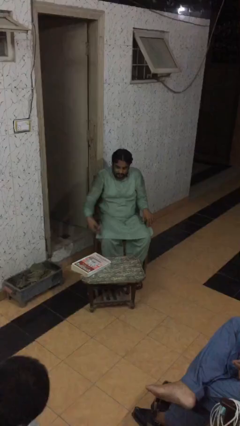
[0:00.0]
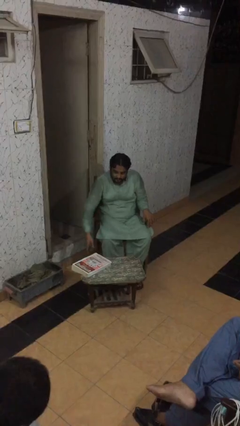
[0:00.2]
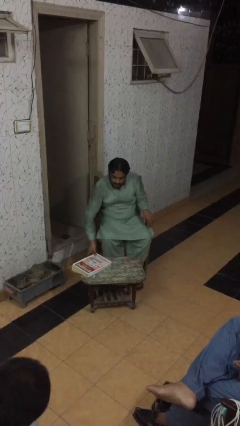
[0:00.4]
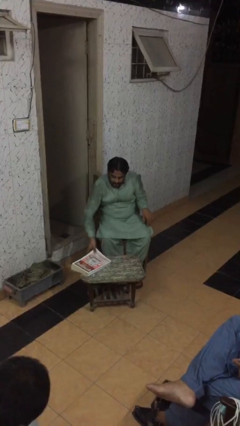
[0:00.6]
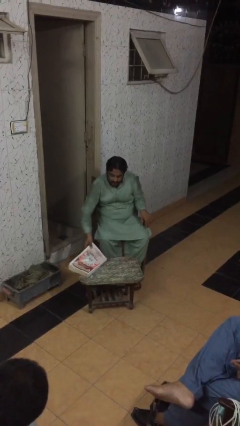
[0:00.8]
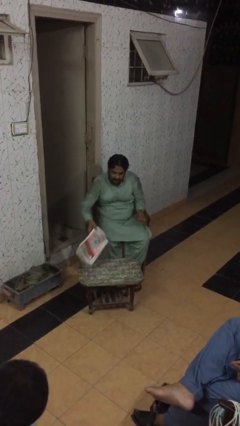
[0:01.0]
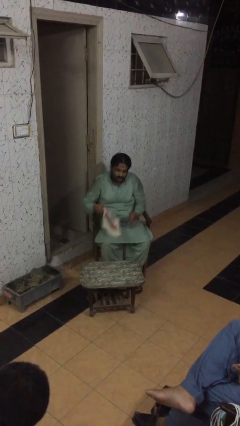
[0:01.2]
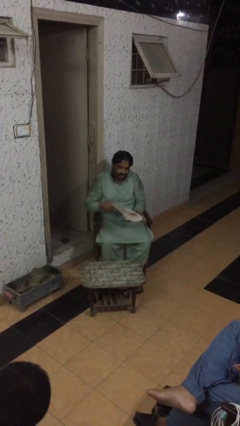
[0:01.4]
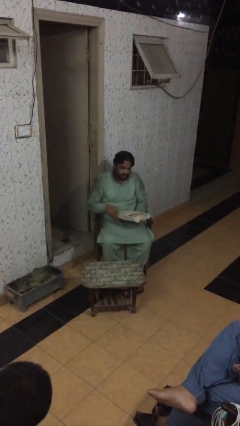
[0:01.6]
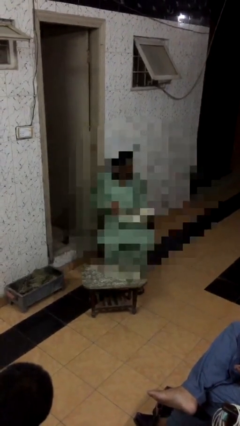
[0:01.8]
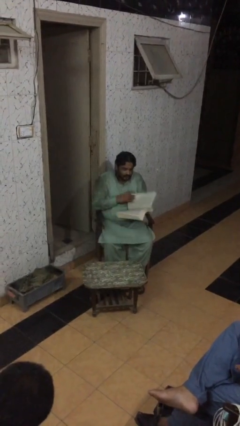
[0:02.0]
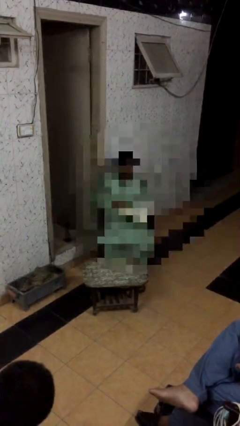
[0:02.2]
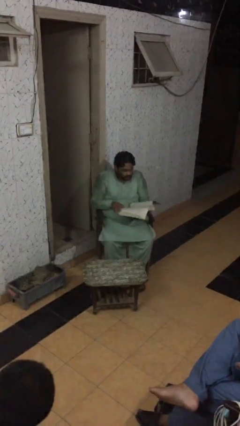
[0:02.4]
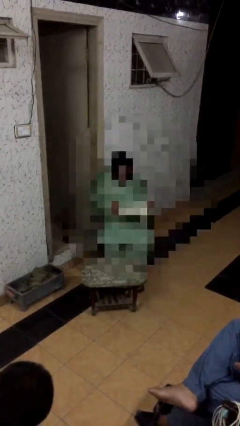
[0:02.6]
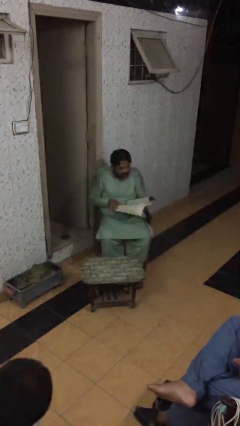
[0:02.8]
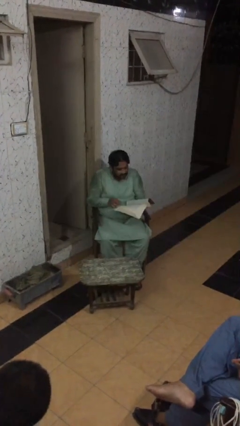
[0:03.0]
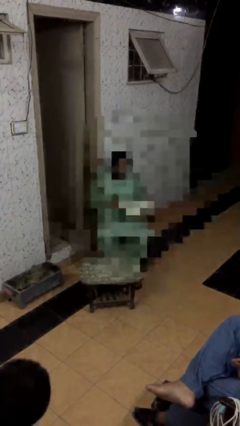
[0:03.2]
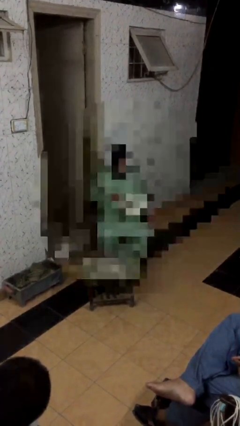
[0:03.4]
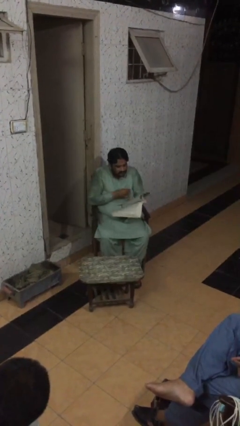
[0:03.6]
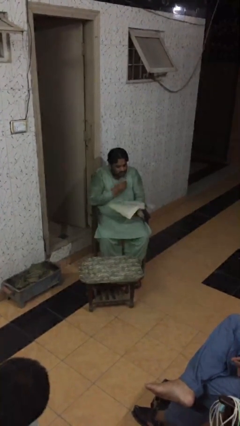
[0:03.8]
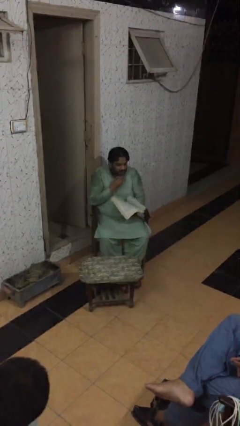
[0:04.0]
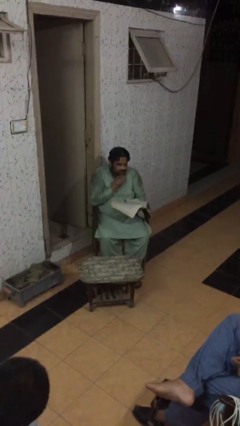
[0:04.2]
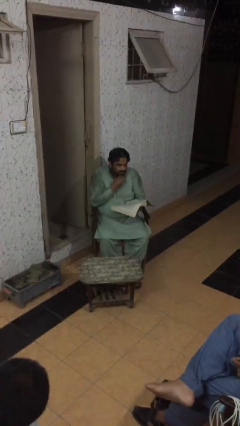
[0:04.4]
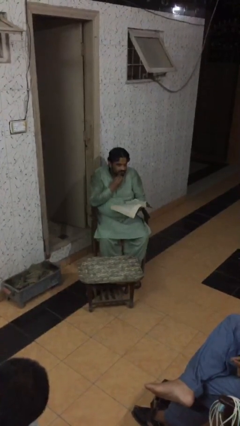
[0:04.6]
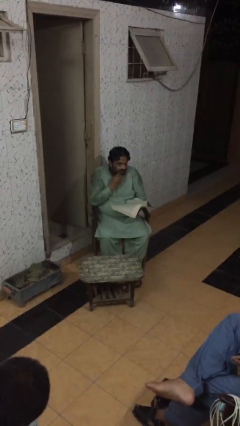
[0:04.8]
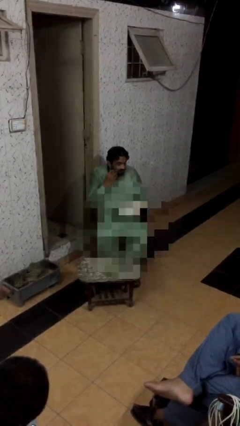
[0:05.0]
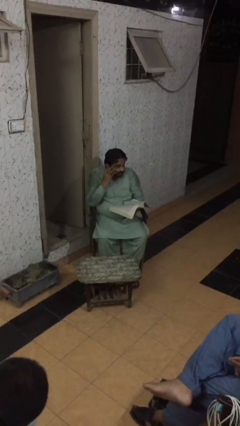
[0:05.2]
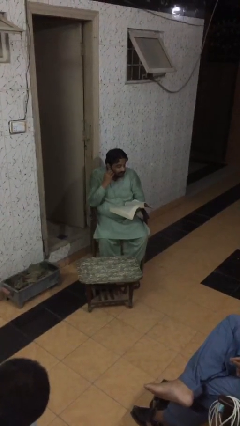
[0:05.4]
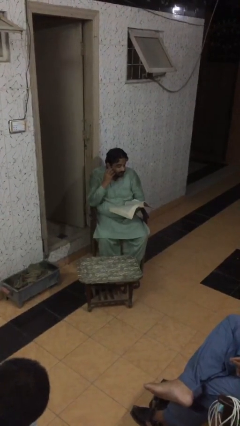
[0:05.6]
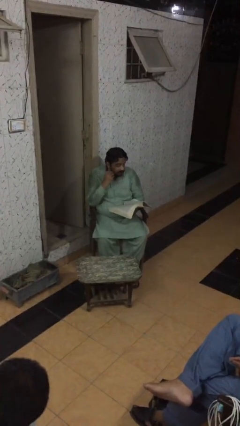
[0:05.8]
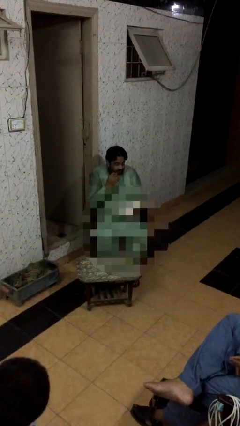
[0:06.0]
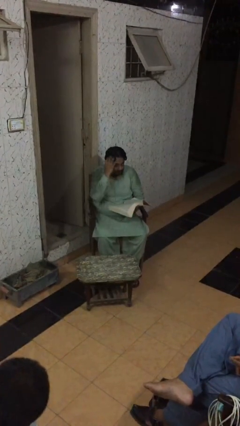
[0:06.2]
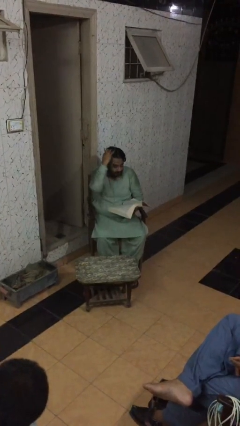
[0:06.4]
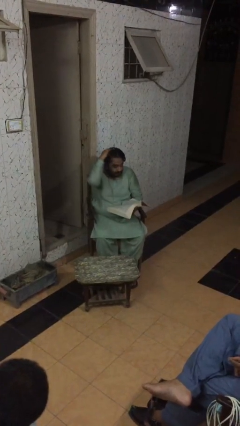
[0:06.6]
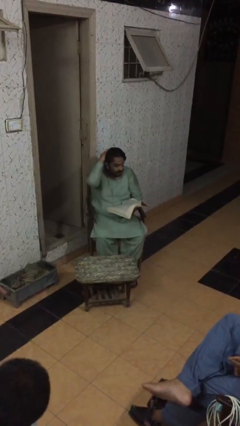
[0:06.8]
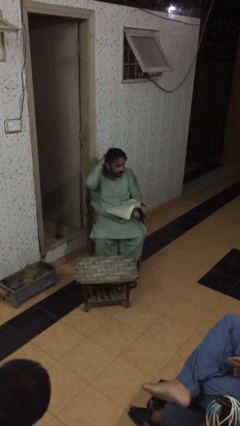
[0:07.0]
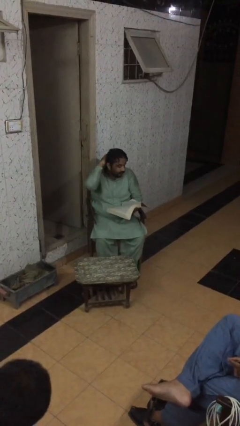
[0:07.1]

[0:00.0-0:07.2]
person reads document

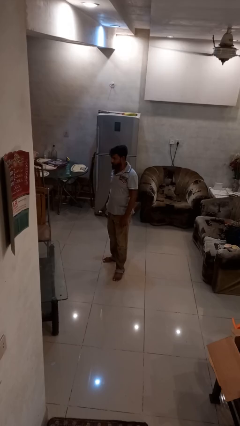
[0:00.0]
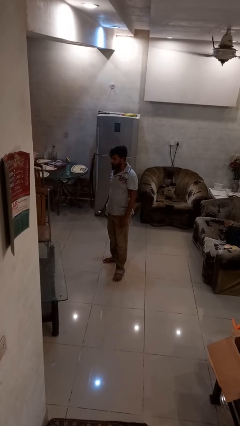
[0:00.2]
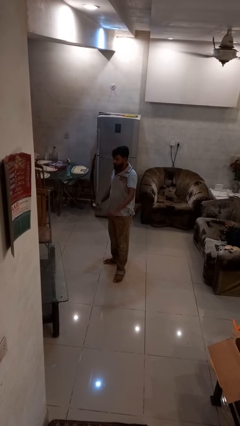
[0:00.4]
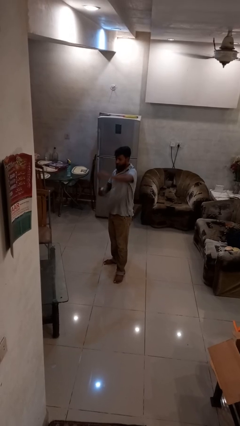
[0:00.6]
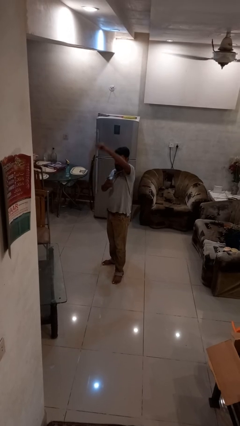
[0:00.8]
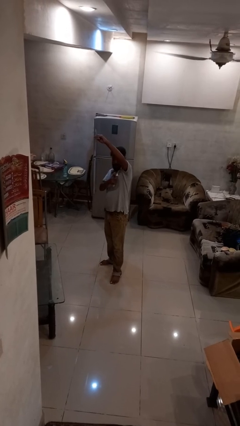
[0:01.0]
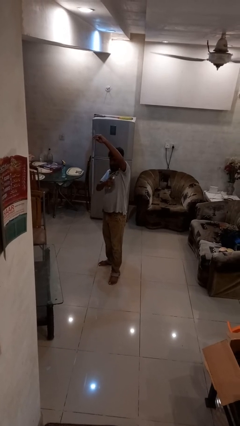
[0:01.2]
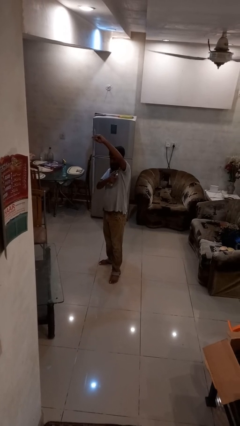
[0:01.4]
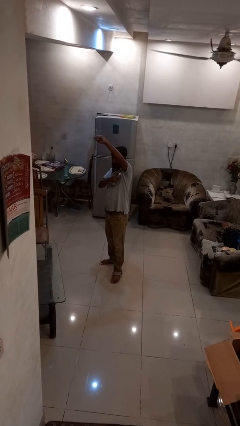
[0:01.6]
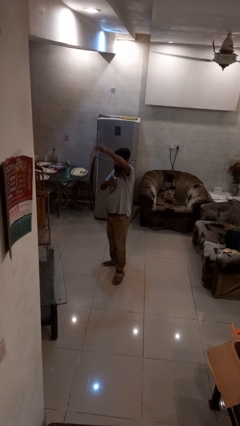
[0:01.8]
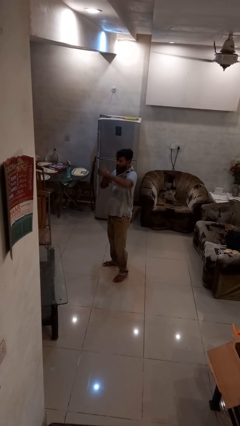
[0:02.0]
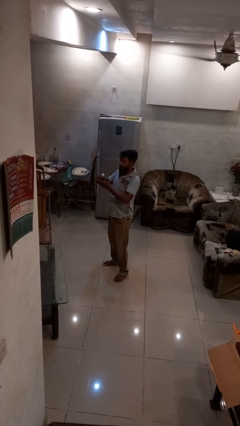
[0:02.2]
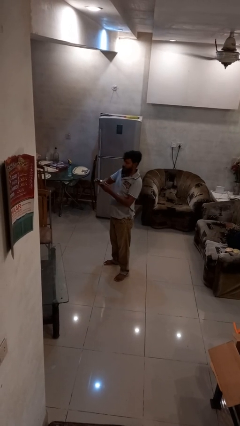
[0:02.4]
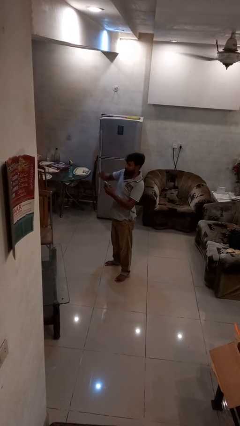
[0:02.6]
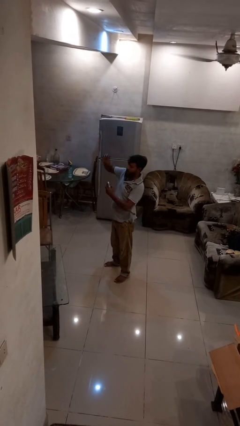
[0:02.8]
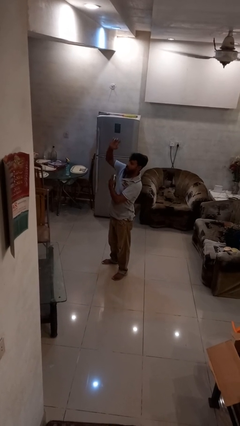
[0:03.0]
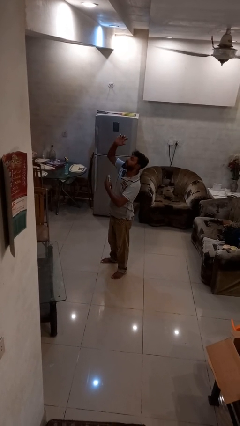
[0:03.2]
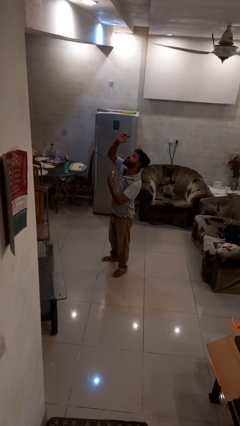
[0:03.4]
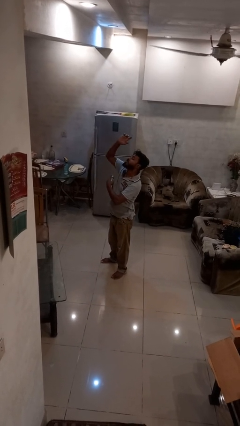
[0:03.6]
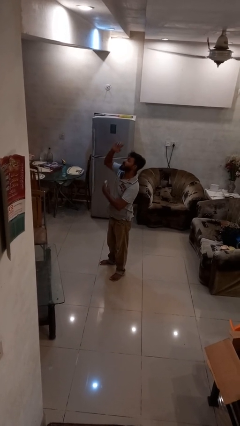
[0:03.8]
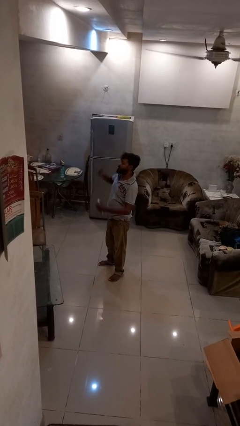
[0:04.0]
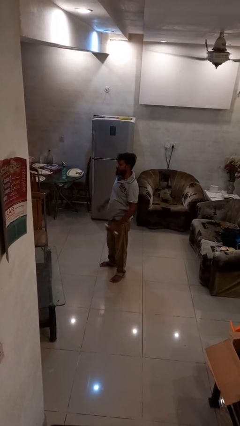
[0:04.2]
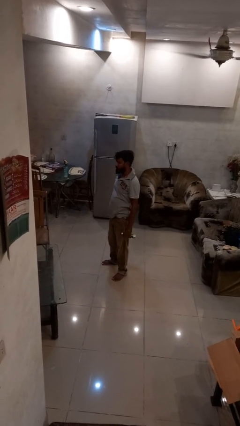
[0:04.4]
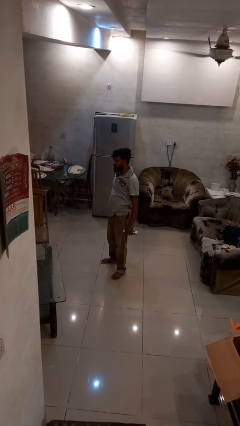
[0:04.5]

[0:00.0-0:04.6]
person applies deodorant

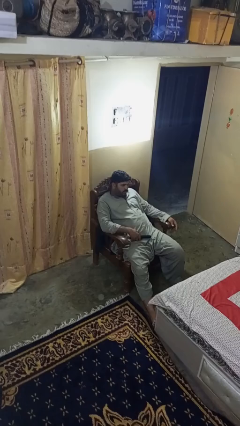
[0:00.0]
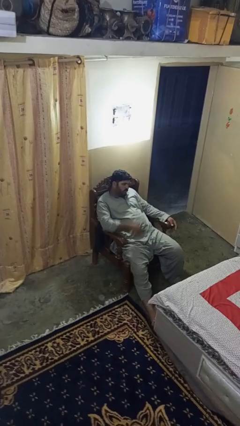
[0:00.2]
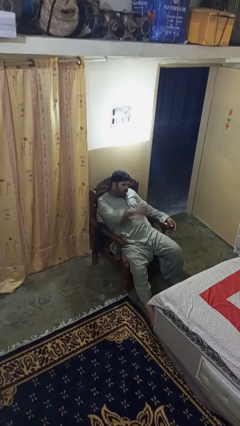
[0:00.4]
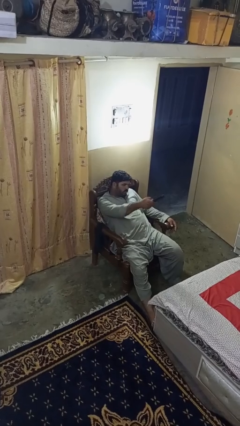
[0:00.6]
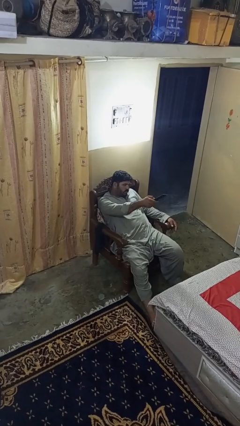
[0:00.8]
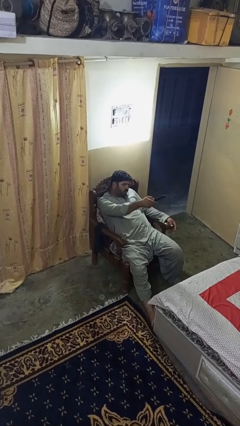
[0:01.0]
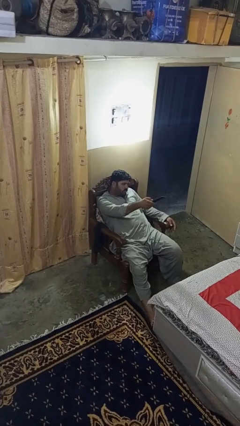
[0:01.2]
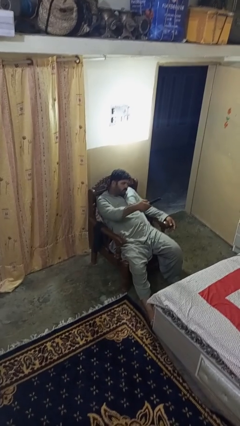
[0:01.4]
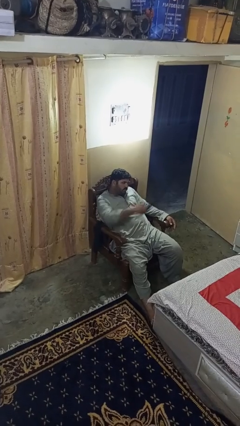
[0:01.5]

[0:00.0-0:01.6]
person uses television remote

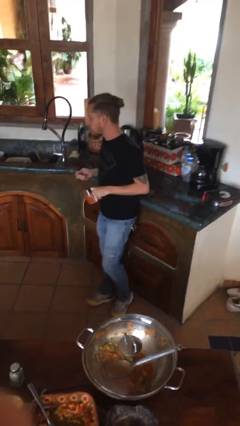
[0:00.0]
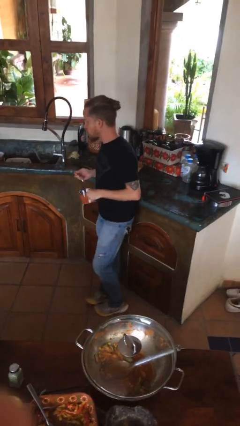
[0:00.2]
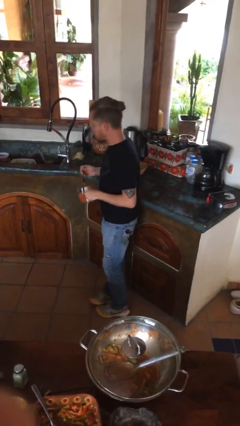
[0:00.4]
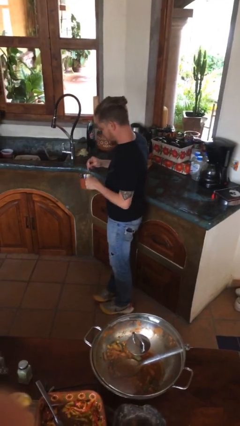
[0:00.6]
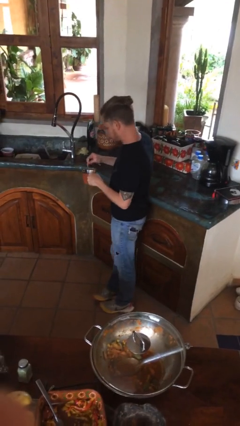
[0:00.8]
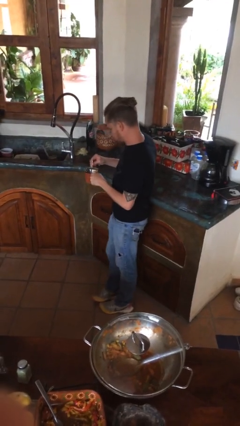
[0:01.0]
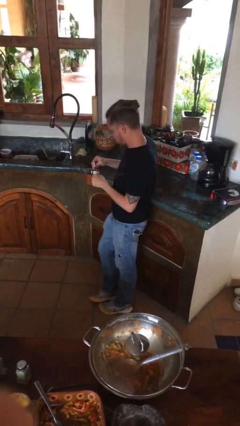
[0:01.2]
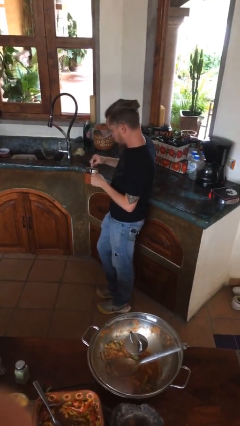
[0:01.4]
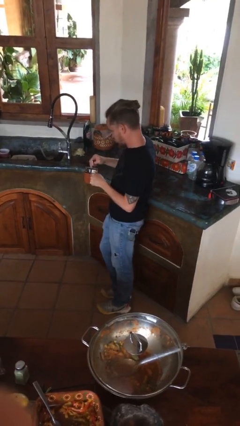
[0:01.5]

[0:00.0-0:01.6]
person stirs mug

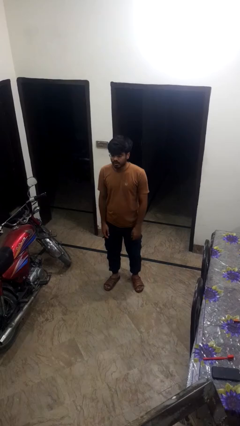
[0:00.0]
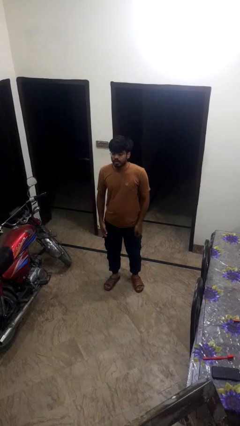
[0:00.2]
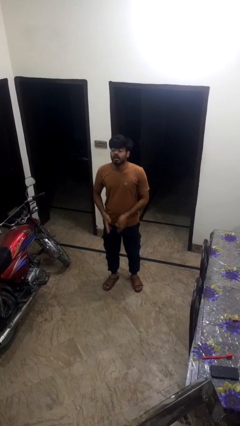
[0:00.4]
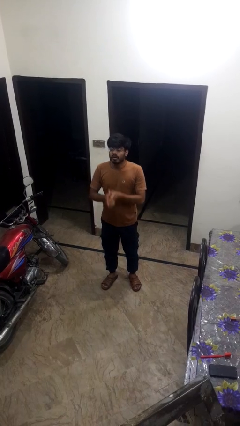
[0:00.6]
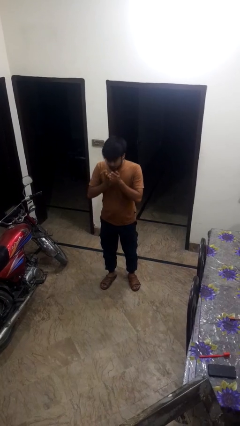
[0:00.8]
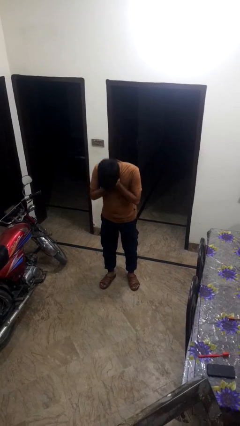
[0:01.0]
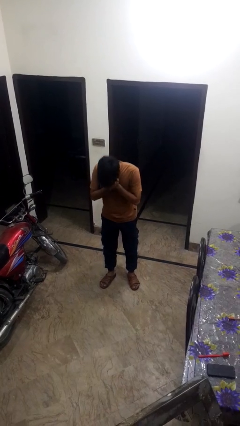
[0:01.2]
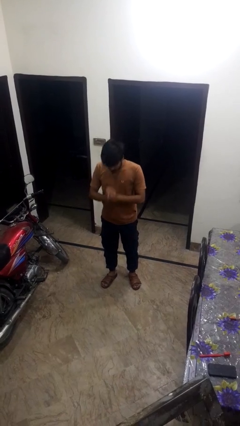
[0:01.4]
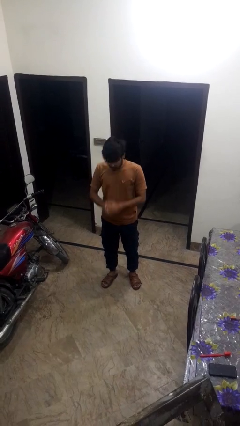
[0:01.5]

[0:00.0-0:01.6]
person sneezes into hand

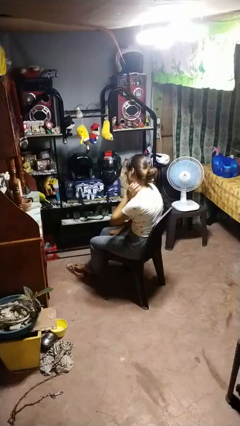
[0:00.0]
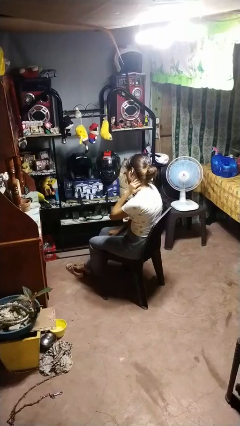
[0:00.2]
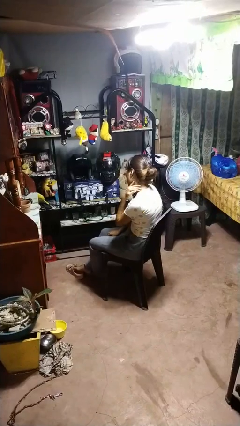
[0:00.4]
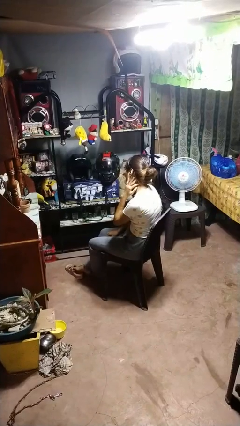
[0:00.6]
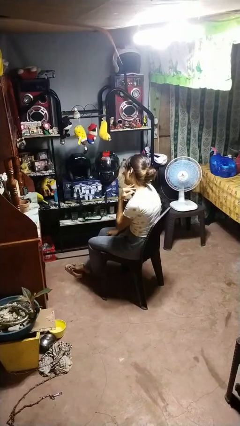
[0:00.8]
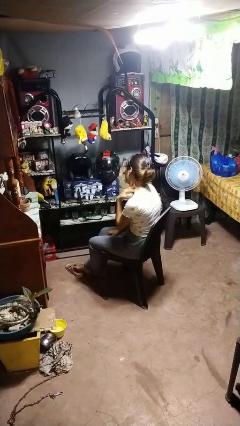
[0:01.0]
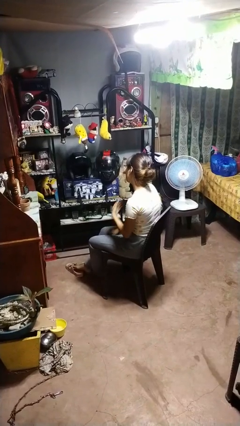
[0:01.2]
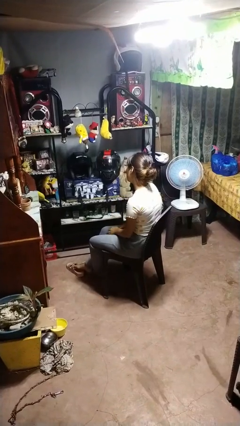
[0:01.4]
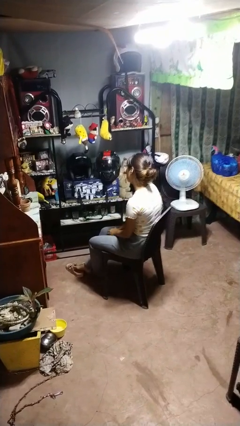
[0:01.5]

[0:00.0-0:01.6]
person rubs neck
